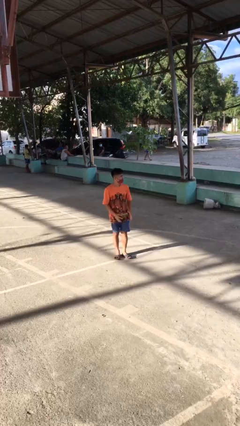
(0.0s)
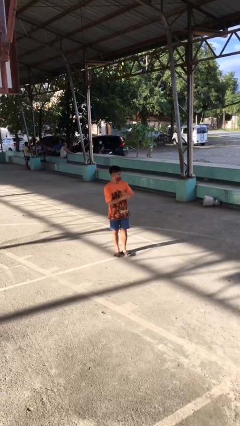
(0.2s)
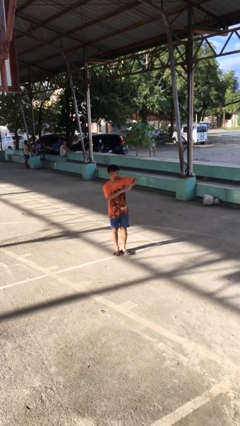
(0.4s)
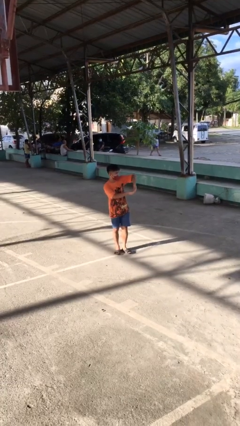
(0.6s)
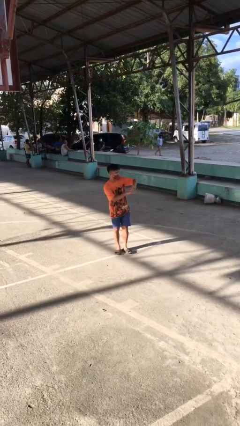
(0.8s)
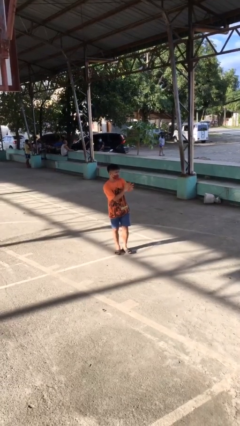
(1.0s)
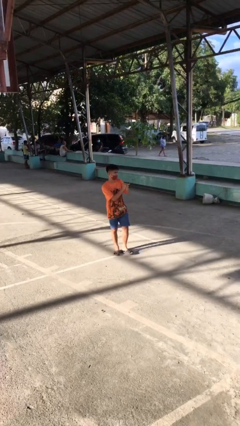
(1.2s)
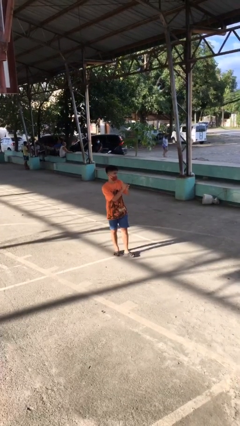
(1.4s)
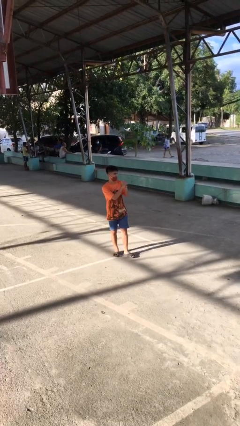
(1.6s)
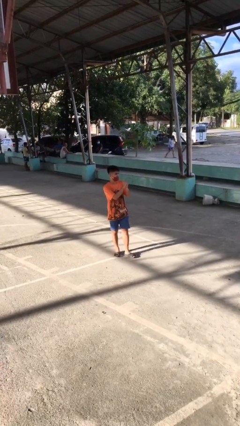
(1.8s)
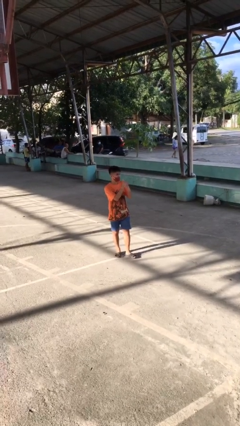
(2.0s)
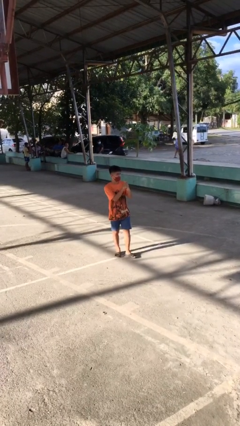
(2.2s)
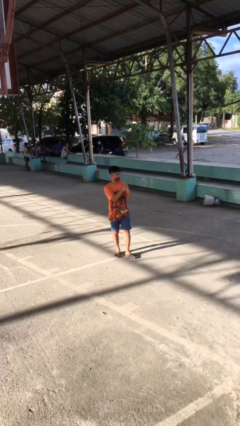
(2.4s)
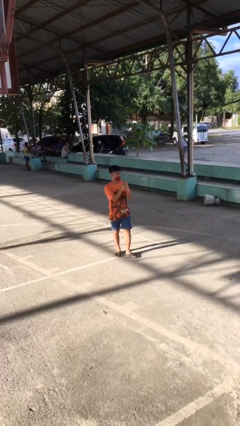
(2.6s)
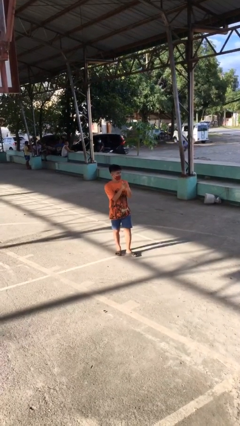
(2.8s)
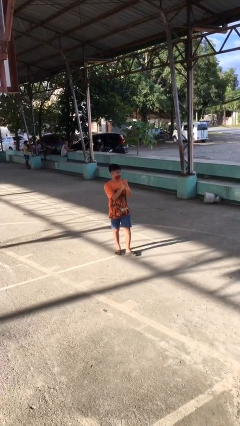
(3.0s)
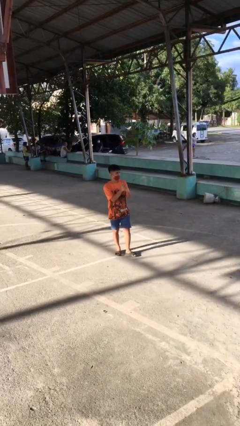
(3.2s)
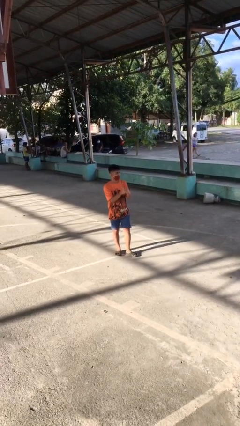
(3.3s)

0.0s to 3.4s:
person cracks knuckles

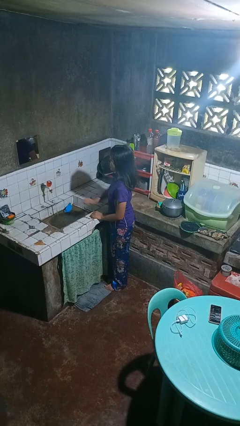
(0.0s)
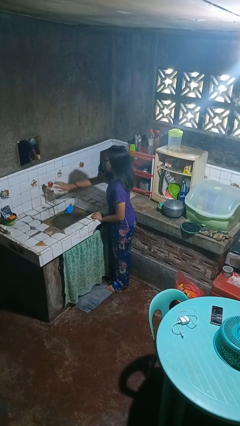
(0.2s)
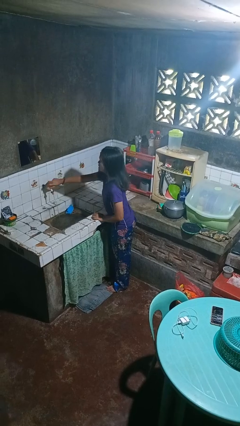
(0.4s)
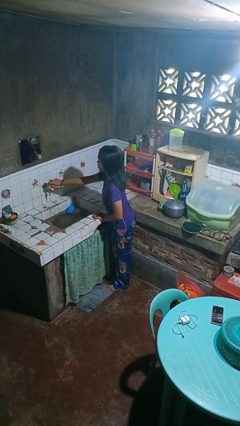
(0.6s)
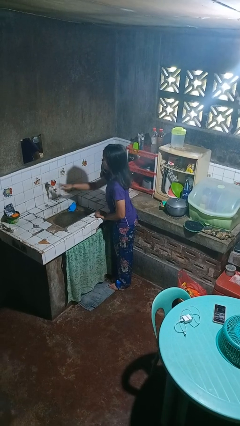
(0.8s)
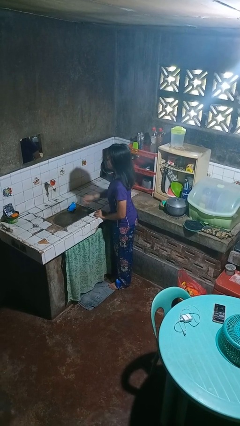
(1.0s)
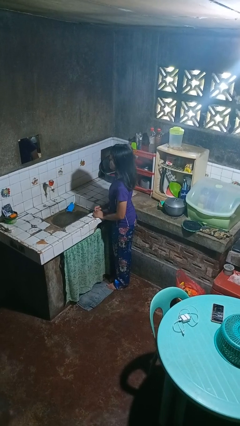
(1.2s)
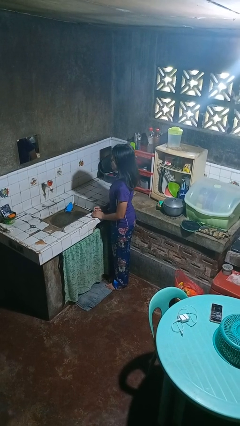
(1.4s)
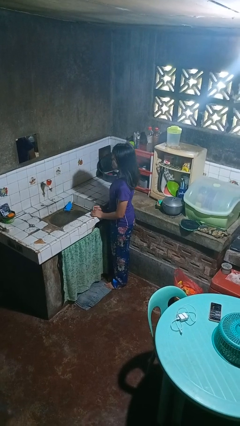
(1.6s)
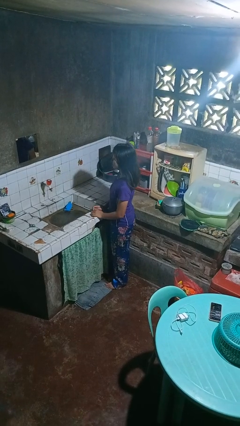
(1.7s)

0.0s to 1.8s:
person turns off faucet

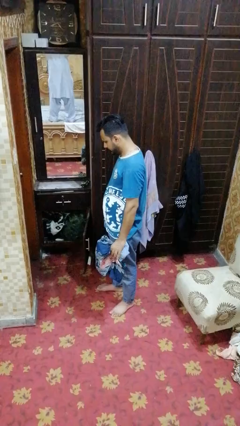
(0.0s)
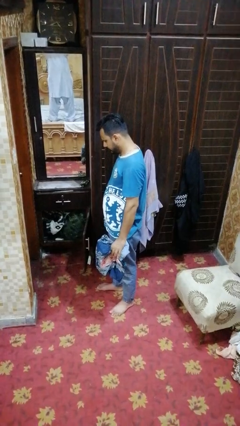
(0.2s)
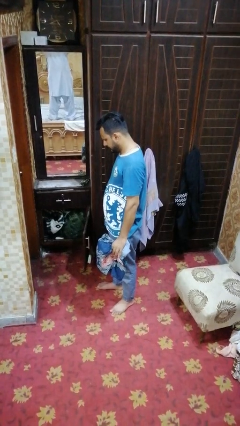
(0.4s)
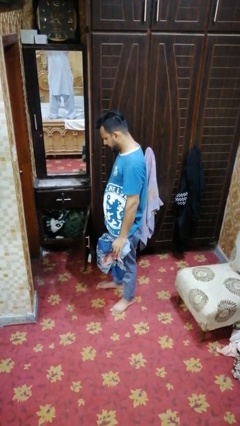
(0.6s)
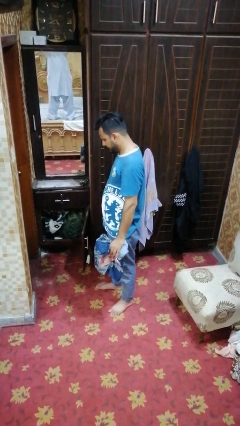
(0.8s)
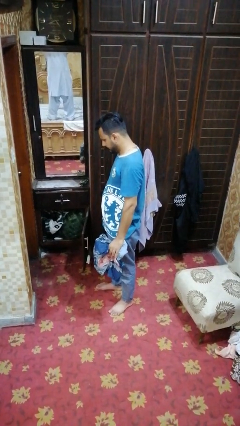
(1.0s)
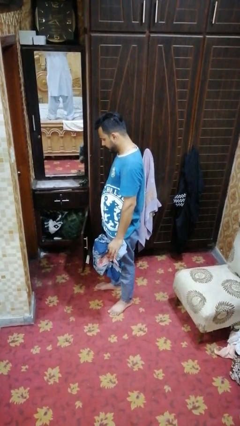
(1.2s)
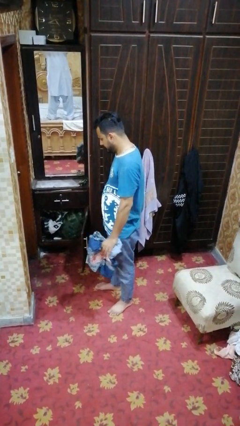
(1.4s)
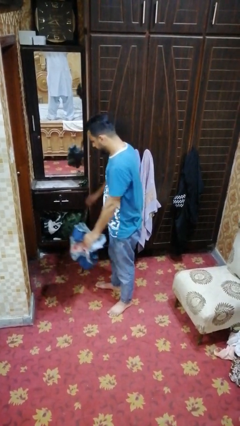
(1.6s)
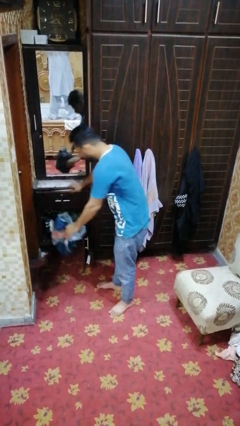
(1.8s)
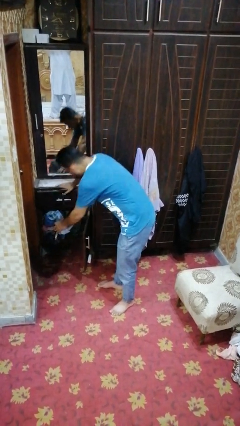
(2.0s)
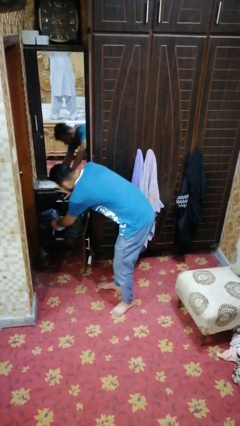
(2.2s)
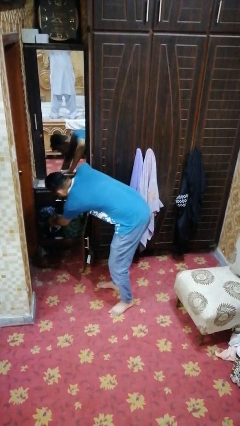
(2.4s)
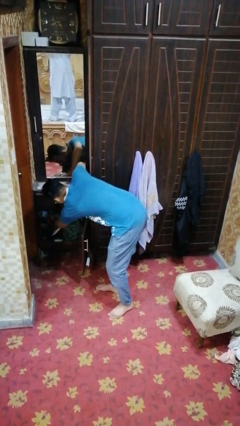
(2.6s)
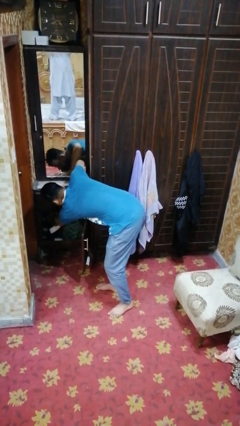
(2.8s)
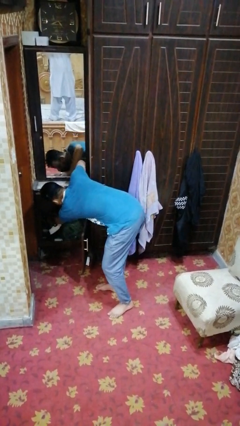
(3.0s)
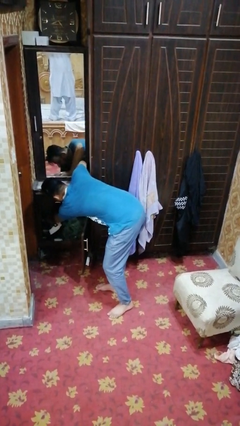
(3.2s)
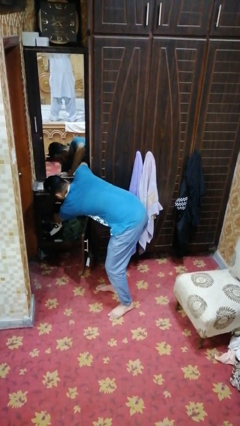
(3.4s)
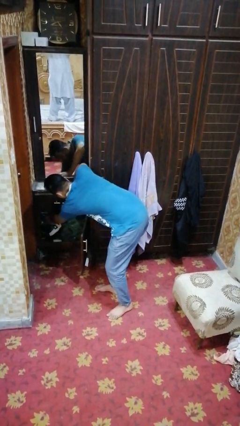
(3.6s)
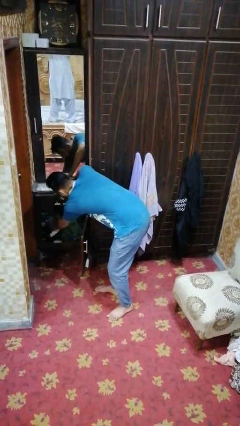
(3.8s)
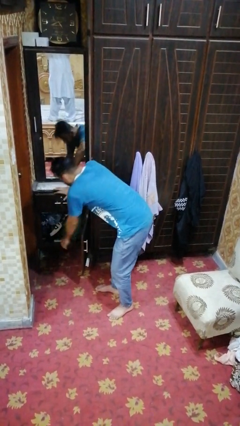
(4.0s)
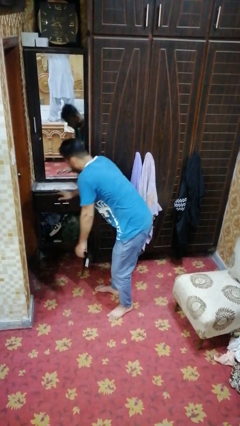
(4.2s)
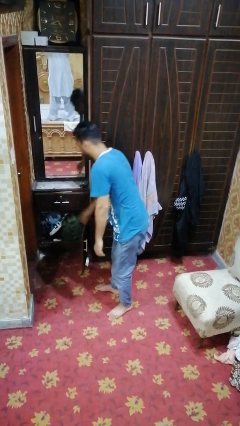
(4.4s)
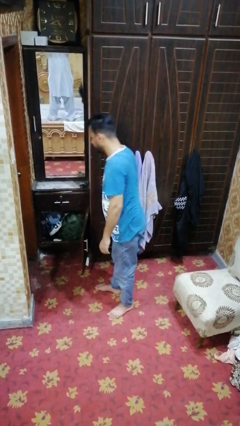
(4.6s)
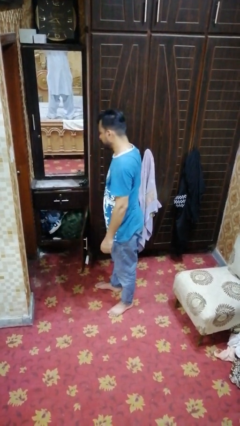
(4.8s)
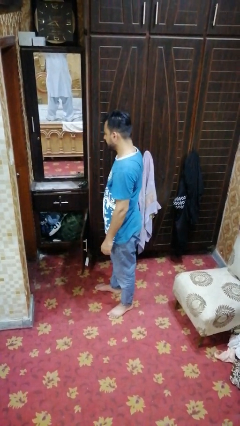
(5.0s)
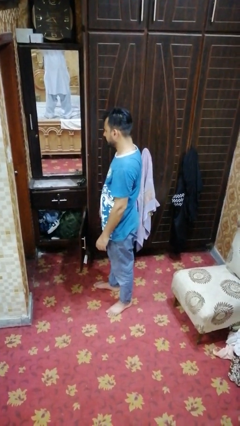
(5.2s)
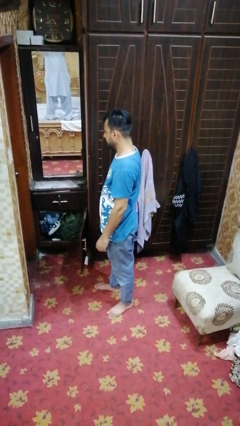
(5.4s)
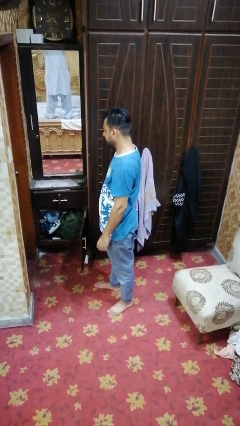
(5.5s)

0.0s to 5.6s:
person puts clothes into dresser

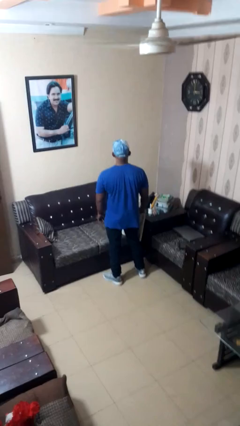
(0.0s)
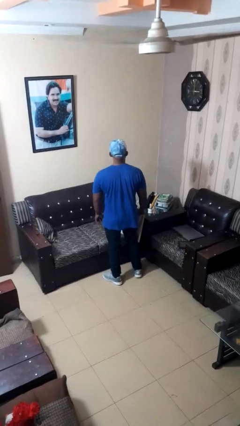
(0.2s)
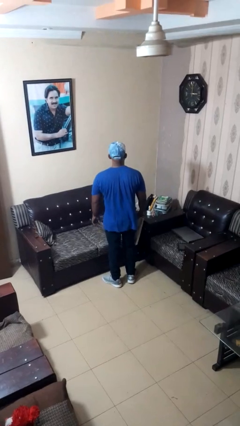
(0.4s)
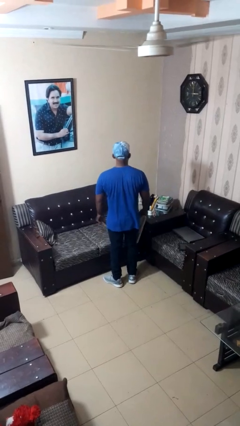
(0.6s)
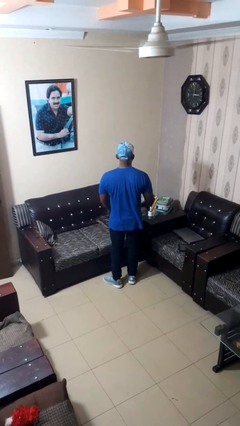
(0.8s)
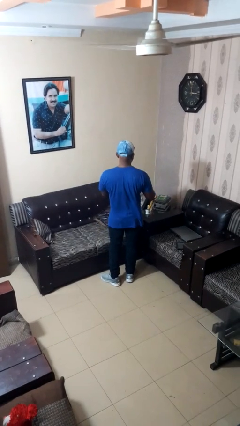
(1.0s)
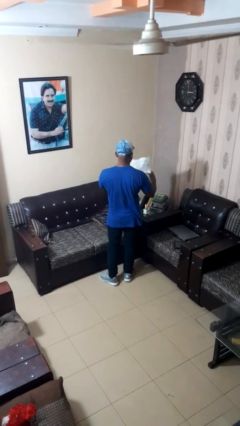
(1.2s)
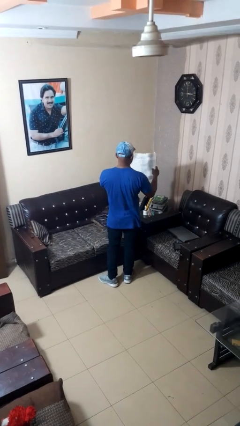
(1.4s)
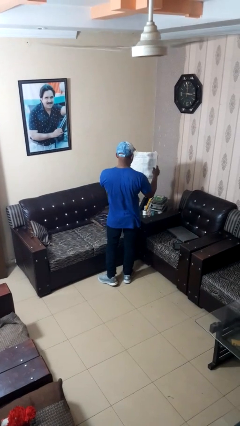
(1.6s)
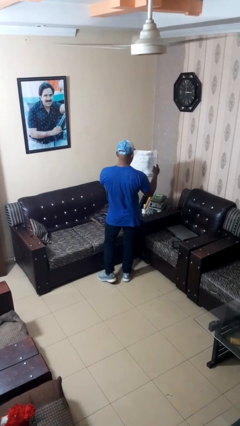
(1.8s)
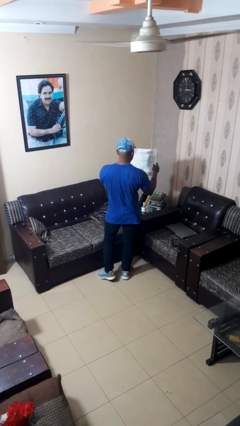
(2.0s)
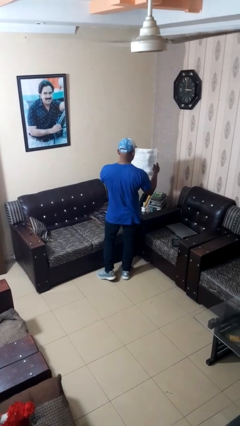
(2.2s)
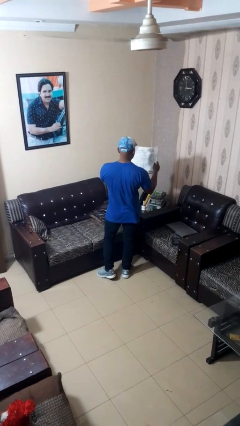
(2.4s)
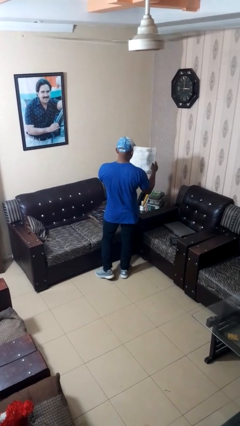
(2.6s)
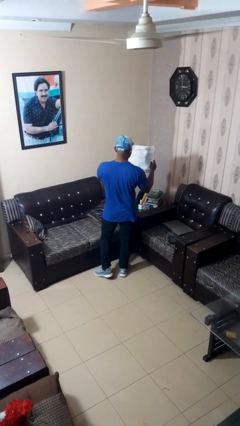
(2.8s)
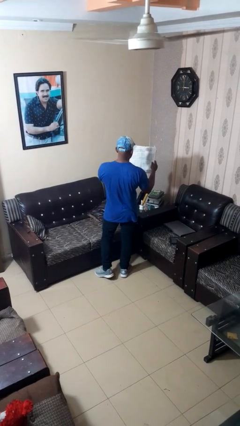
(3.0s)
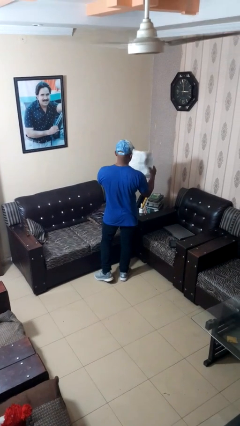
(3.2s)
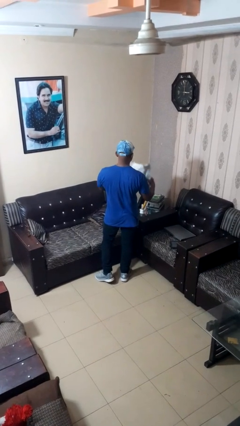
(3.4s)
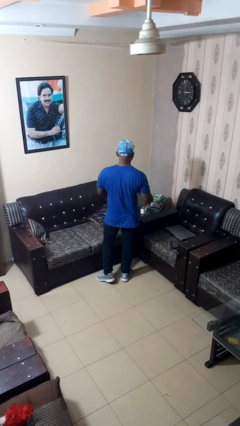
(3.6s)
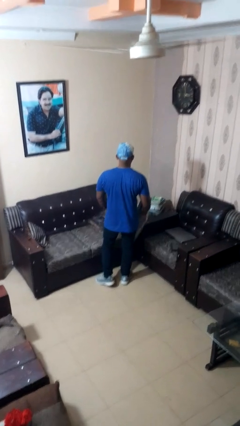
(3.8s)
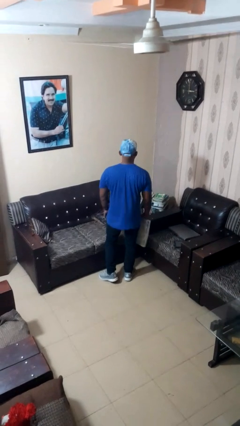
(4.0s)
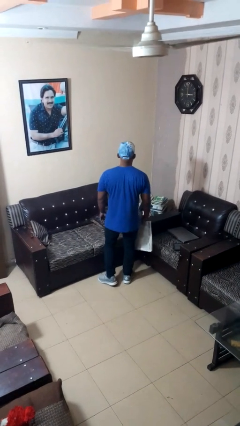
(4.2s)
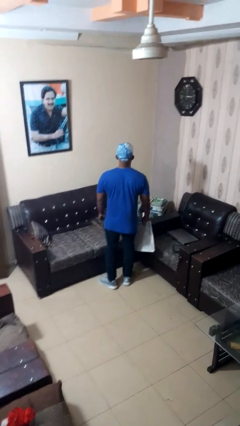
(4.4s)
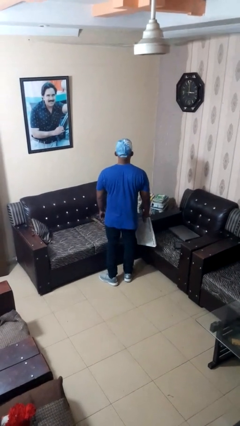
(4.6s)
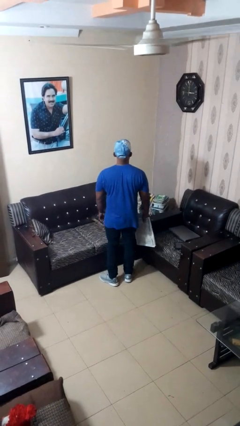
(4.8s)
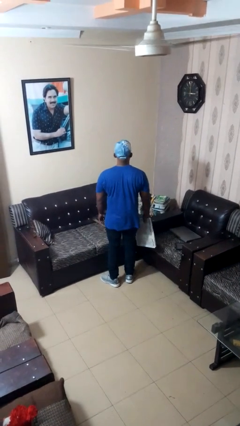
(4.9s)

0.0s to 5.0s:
person reads newspaper

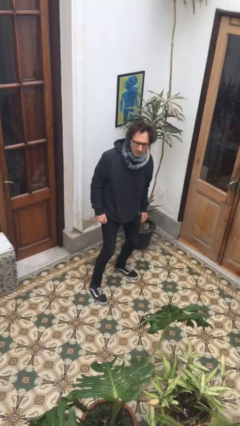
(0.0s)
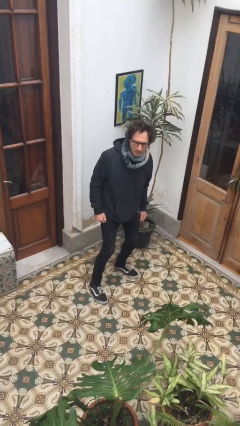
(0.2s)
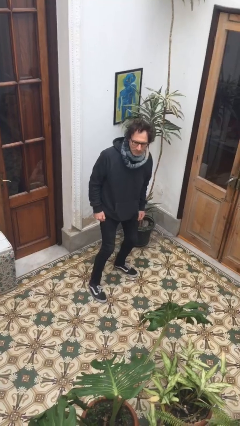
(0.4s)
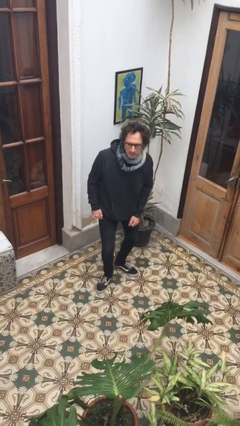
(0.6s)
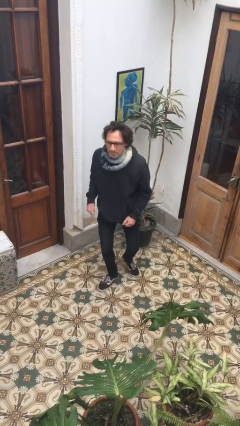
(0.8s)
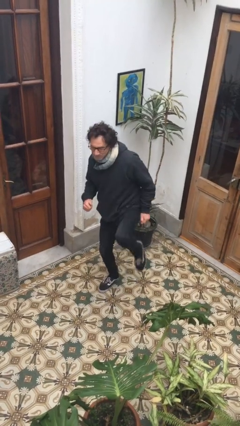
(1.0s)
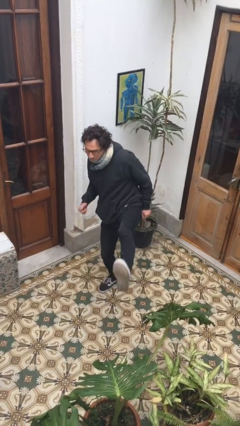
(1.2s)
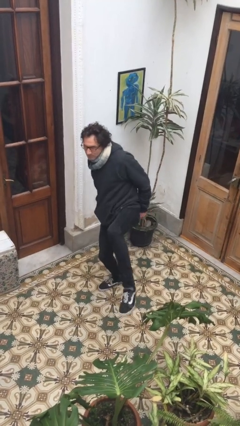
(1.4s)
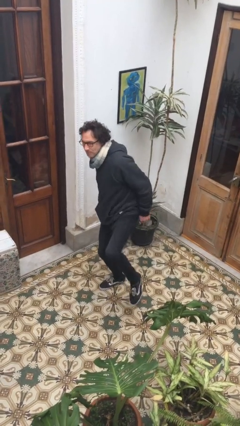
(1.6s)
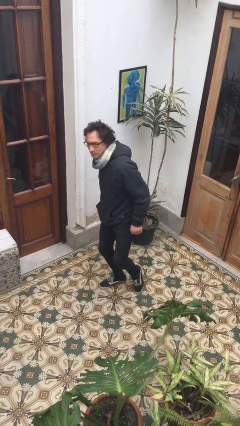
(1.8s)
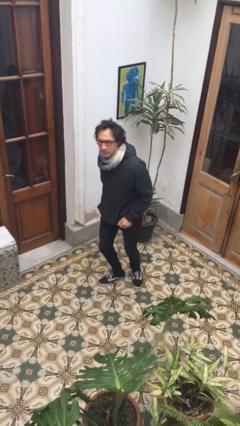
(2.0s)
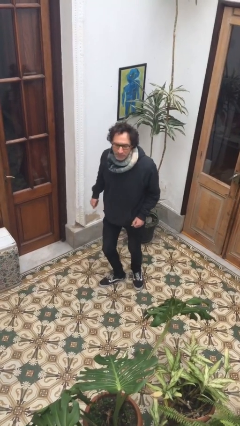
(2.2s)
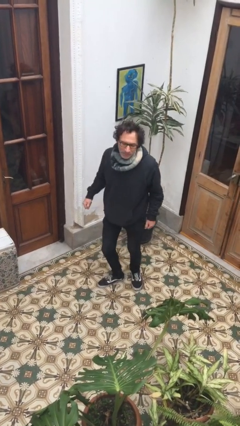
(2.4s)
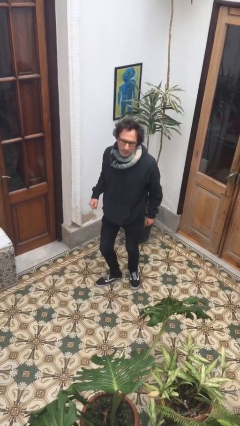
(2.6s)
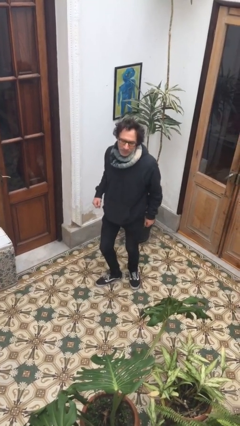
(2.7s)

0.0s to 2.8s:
person karate kicks
